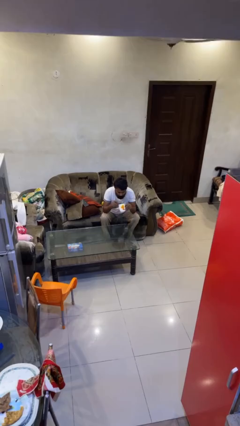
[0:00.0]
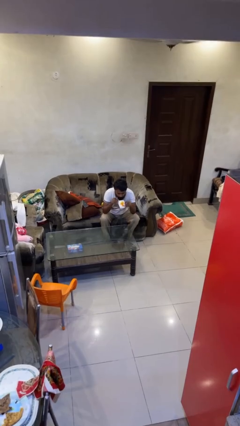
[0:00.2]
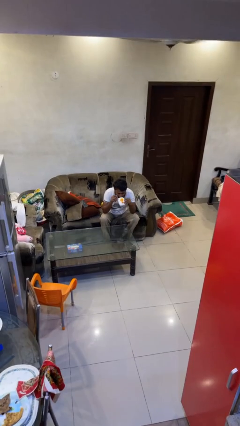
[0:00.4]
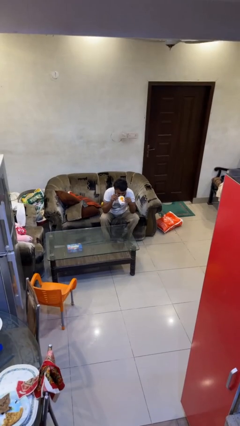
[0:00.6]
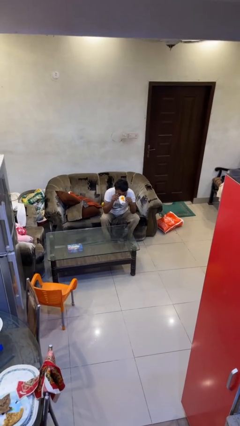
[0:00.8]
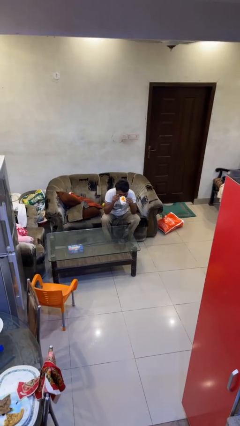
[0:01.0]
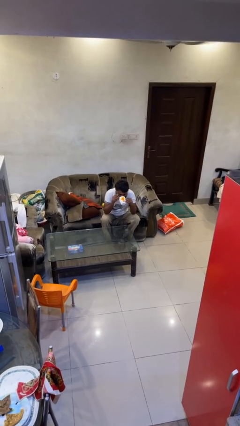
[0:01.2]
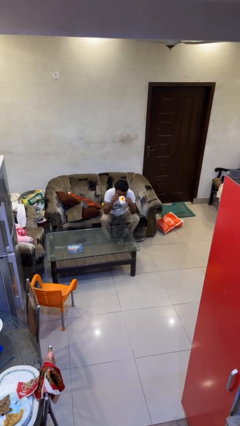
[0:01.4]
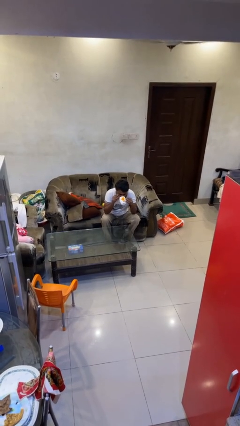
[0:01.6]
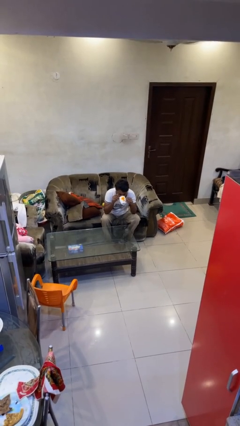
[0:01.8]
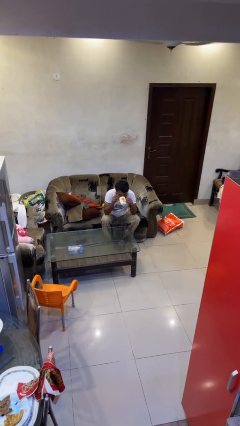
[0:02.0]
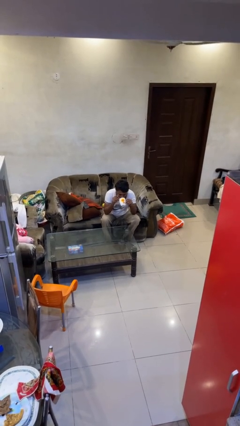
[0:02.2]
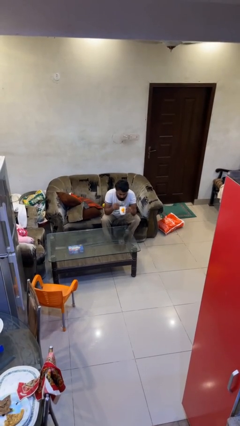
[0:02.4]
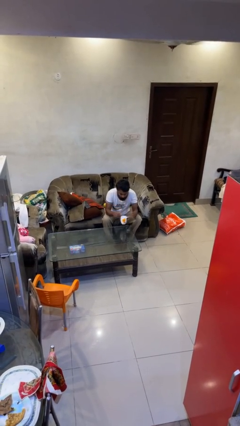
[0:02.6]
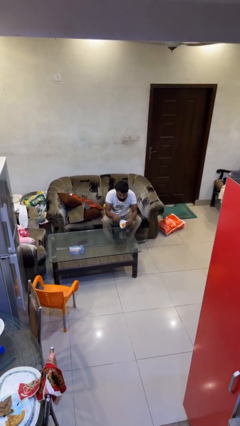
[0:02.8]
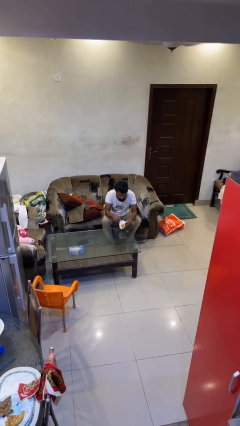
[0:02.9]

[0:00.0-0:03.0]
person drinks from mug

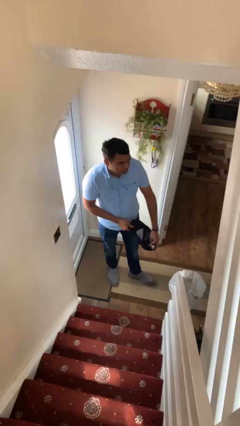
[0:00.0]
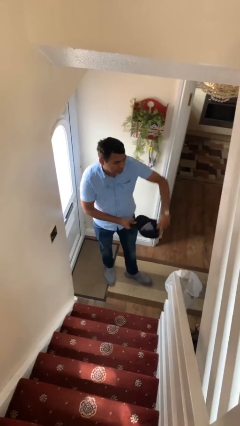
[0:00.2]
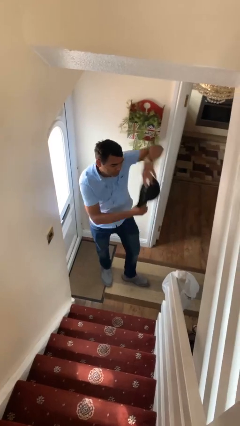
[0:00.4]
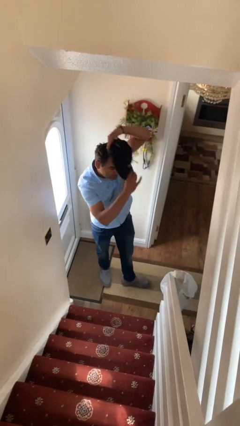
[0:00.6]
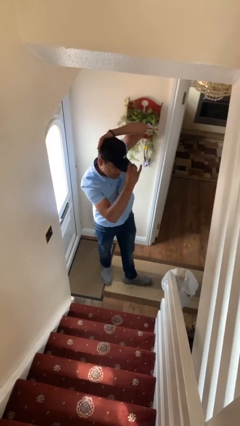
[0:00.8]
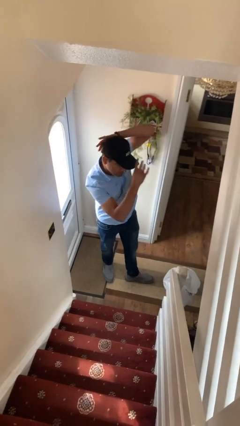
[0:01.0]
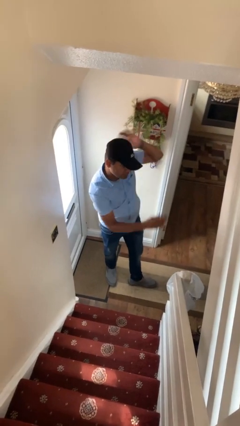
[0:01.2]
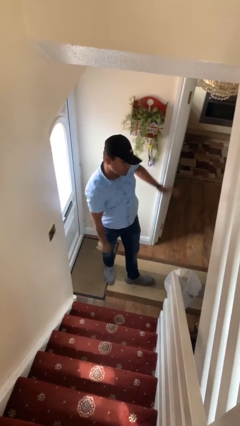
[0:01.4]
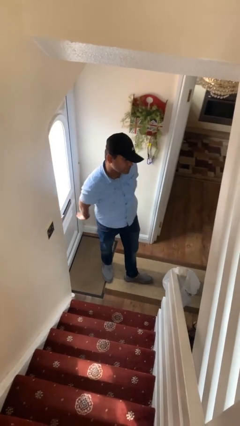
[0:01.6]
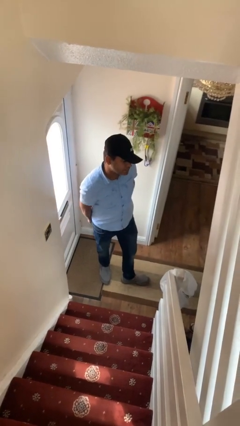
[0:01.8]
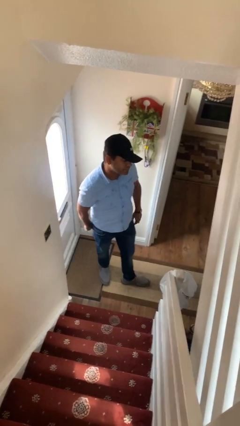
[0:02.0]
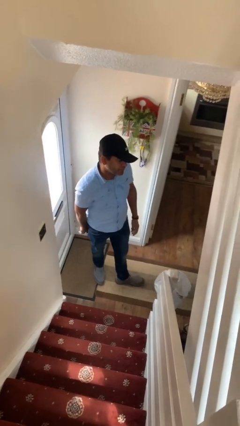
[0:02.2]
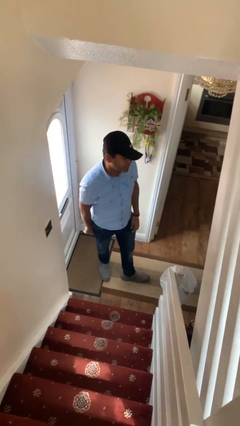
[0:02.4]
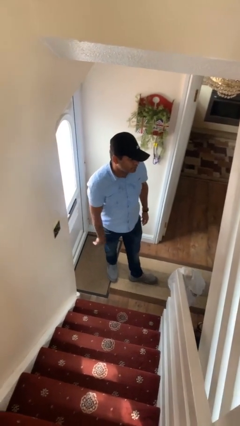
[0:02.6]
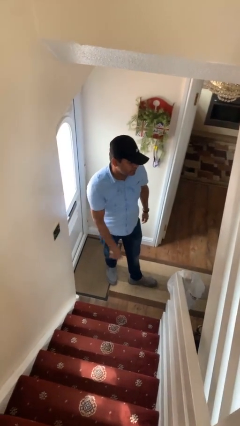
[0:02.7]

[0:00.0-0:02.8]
person puts on hat

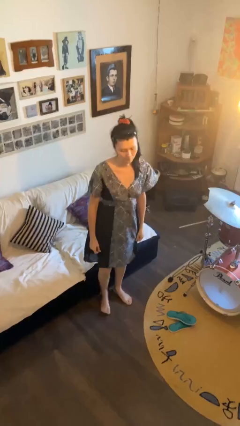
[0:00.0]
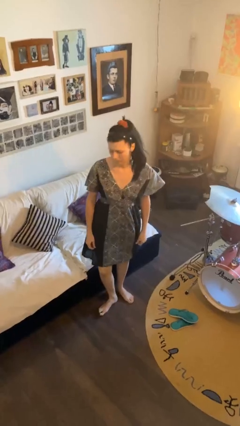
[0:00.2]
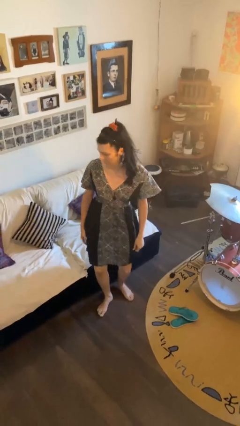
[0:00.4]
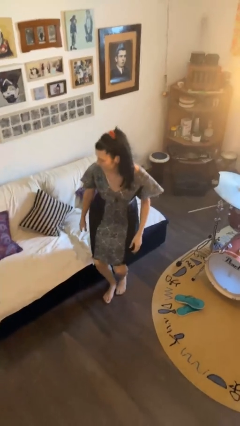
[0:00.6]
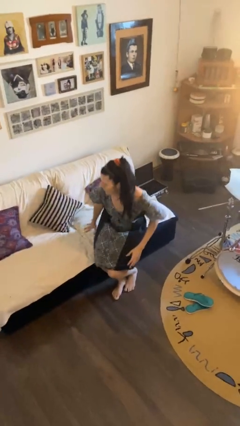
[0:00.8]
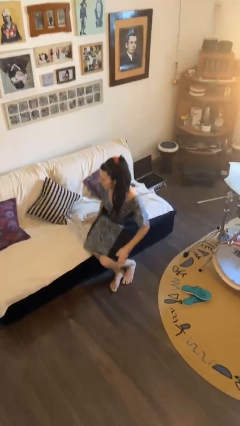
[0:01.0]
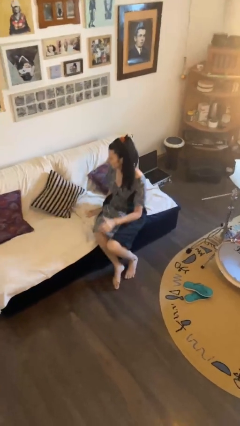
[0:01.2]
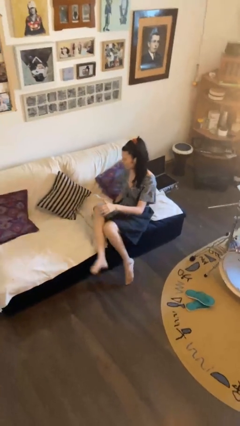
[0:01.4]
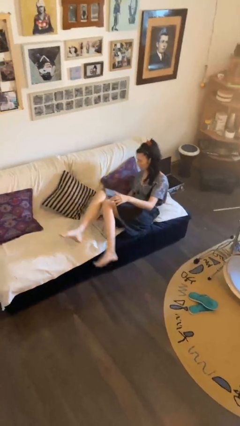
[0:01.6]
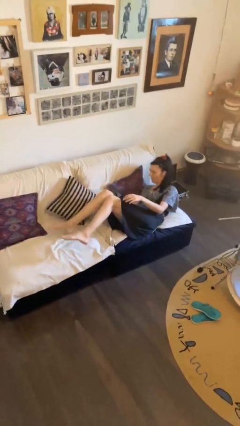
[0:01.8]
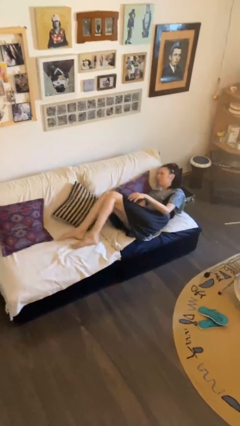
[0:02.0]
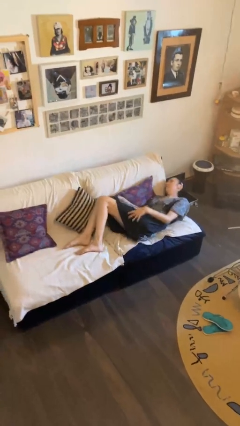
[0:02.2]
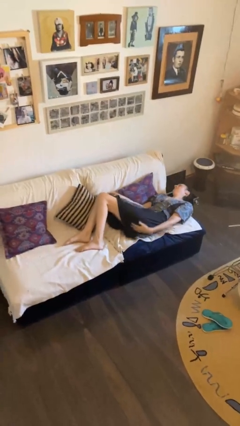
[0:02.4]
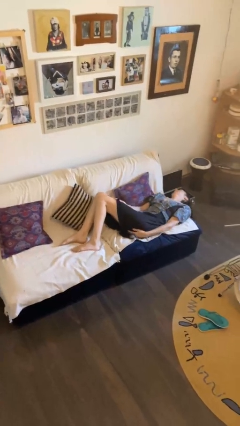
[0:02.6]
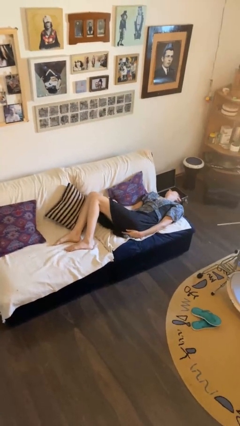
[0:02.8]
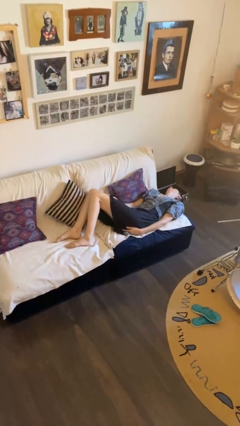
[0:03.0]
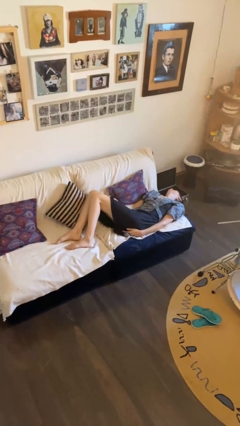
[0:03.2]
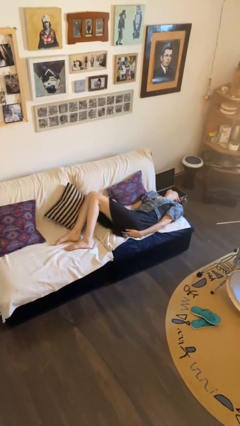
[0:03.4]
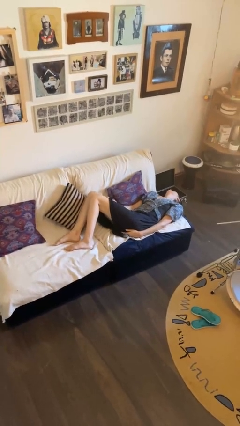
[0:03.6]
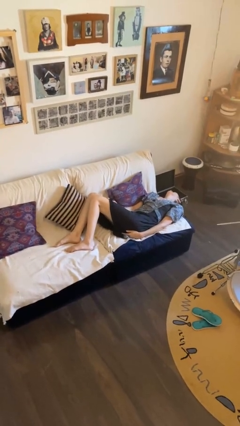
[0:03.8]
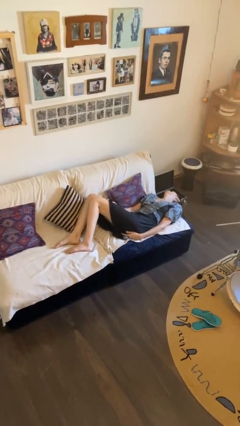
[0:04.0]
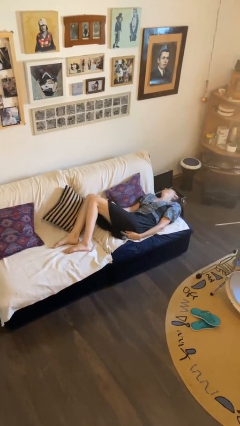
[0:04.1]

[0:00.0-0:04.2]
person lies down on couch

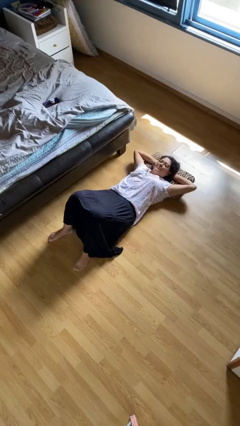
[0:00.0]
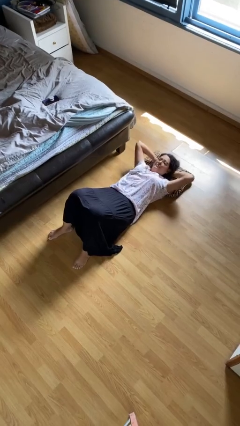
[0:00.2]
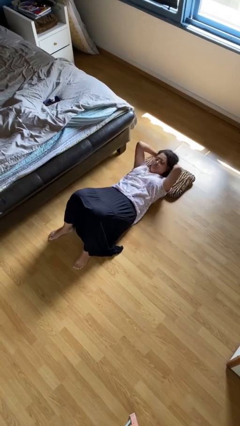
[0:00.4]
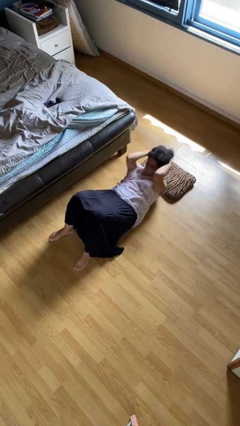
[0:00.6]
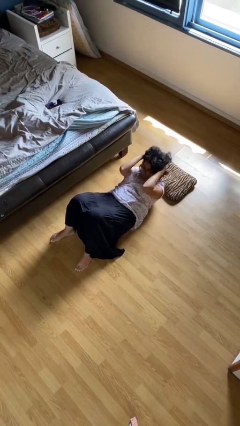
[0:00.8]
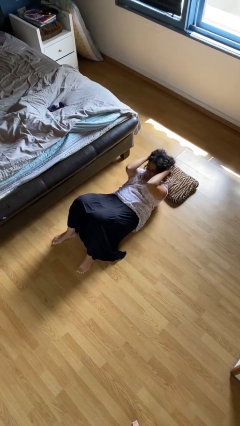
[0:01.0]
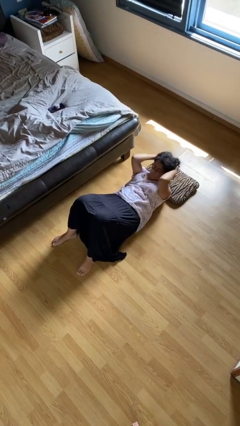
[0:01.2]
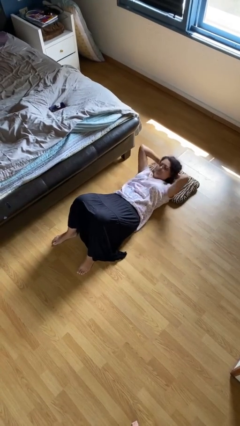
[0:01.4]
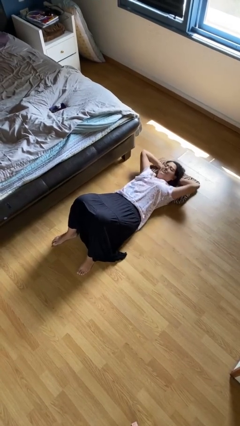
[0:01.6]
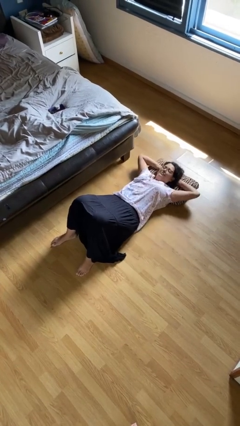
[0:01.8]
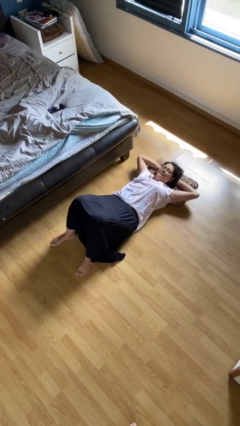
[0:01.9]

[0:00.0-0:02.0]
person exercises with situp

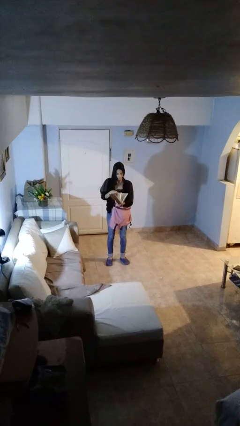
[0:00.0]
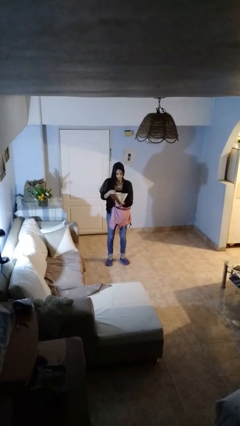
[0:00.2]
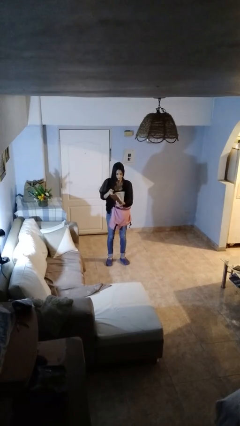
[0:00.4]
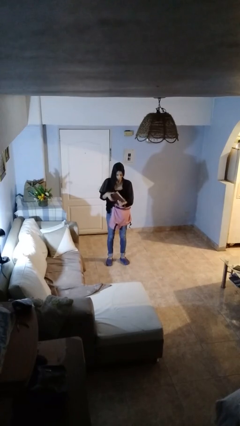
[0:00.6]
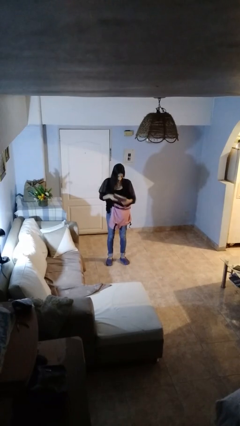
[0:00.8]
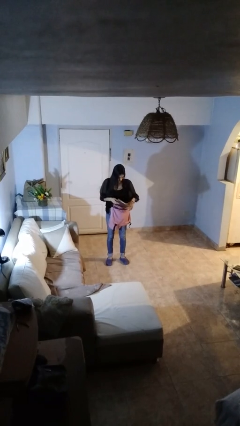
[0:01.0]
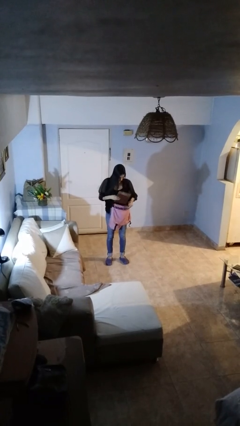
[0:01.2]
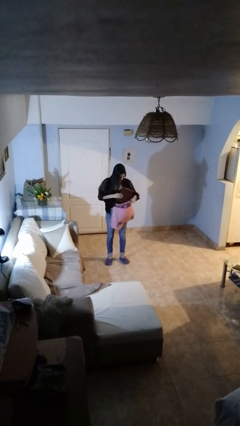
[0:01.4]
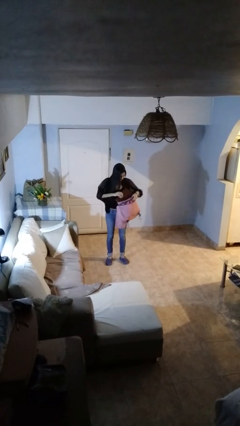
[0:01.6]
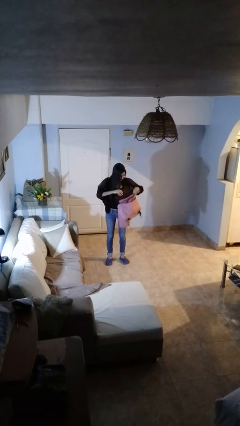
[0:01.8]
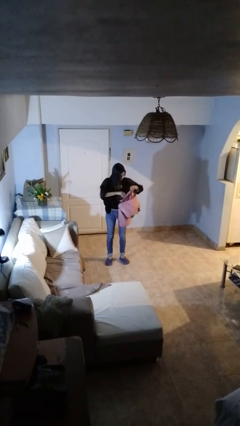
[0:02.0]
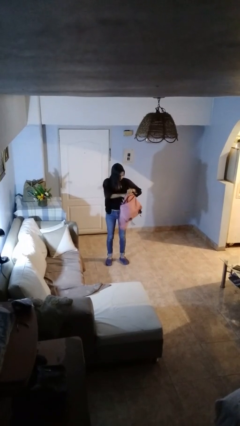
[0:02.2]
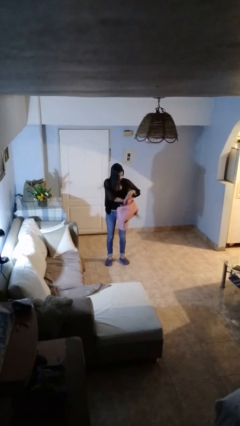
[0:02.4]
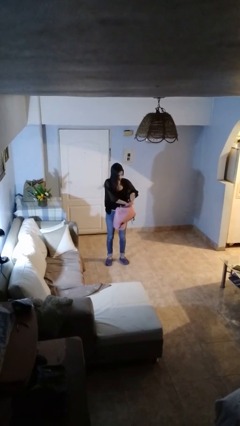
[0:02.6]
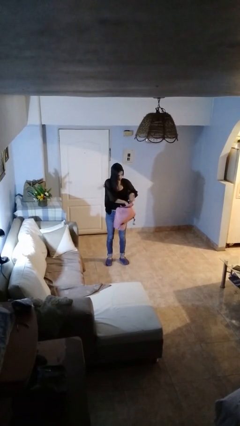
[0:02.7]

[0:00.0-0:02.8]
person puts object into backpack

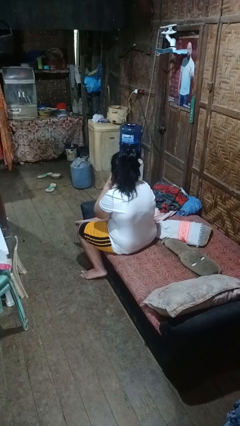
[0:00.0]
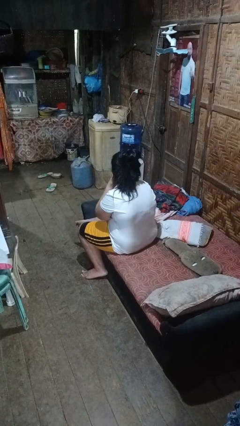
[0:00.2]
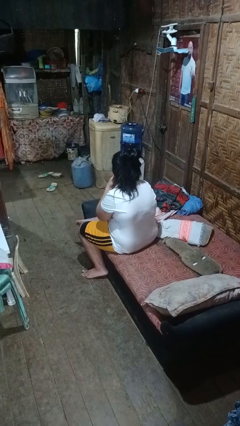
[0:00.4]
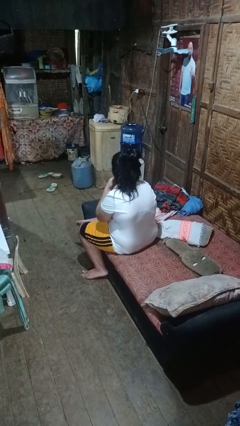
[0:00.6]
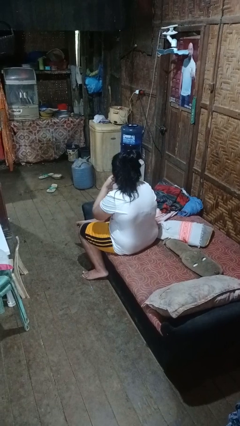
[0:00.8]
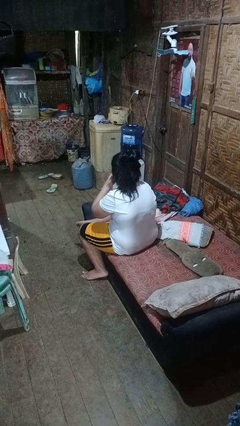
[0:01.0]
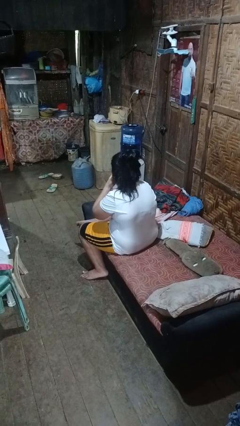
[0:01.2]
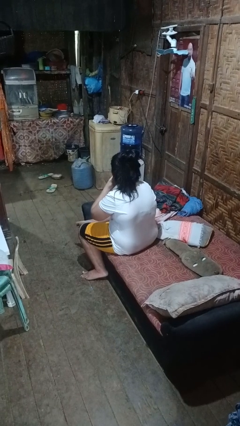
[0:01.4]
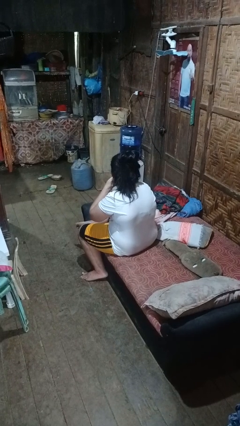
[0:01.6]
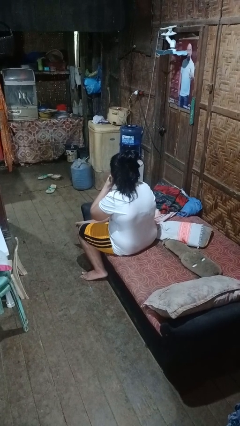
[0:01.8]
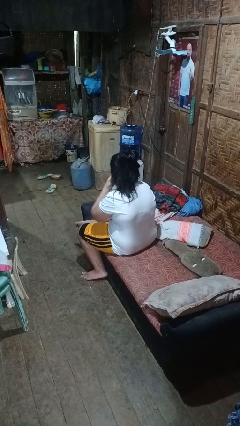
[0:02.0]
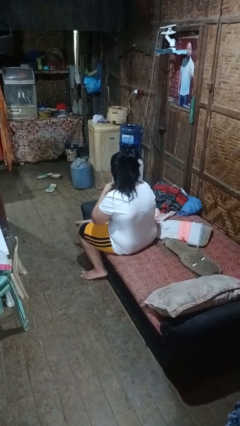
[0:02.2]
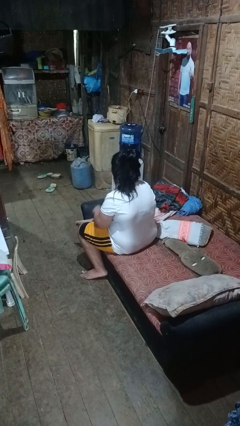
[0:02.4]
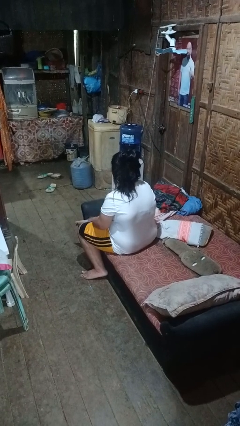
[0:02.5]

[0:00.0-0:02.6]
person strokes chin

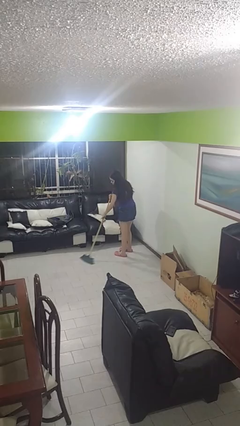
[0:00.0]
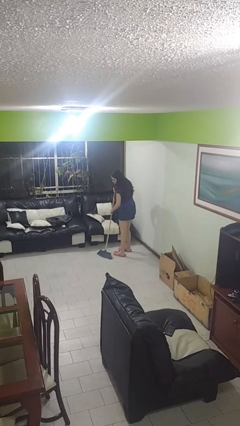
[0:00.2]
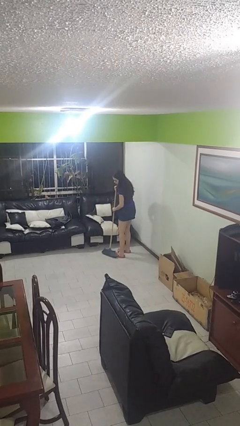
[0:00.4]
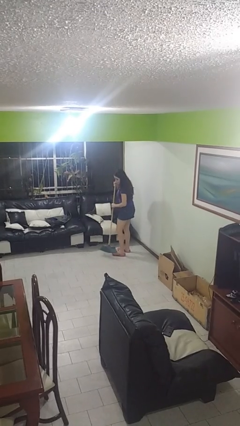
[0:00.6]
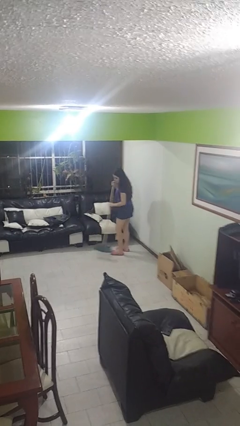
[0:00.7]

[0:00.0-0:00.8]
person sweeps floor
